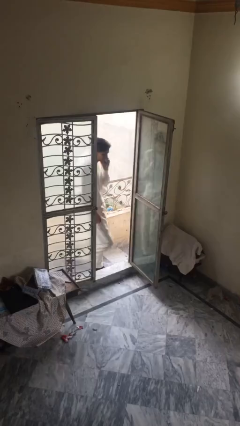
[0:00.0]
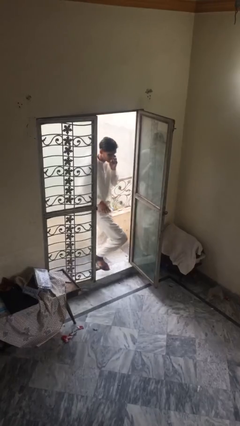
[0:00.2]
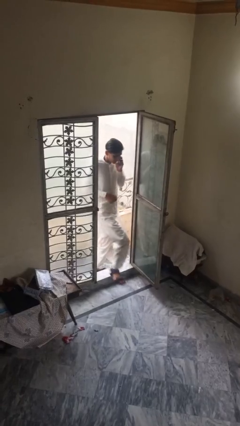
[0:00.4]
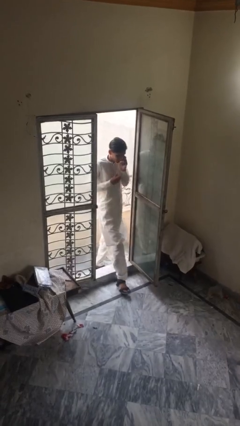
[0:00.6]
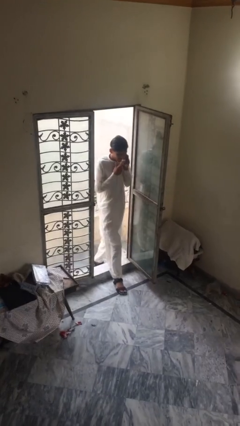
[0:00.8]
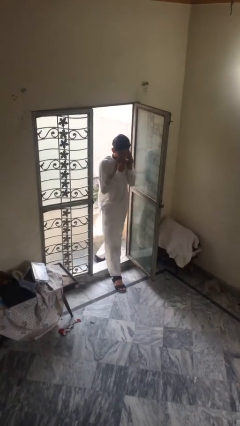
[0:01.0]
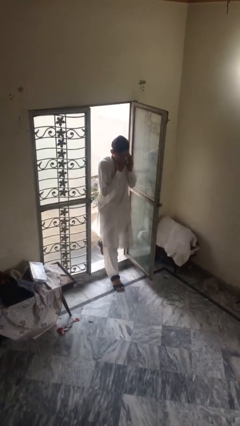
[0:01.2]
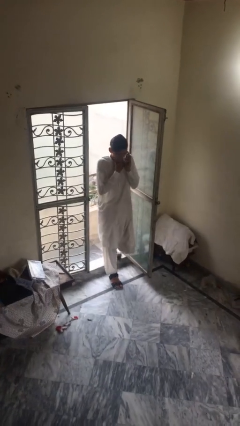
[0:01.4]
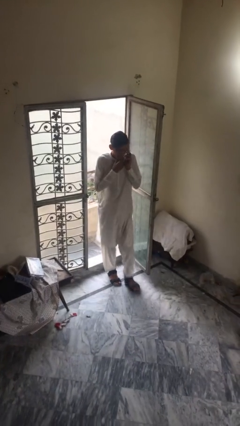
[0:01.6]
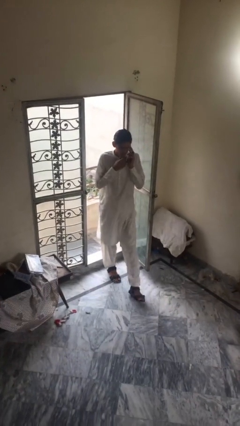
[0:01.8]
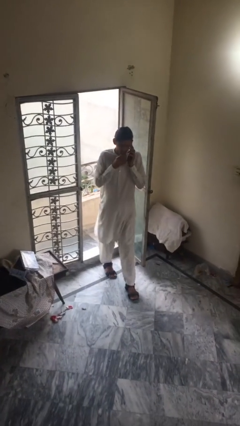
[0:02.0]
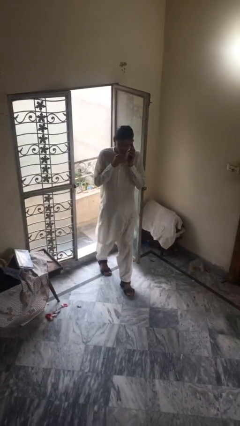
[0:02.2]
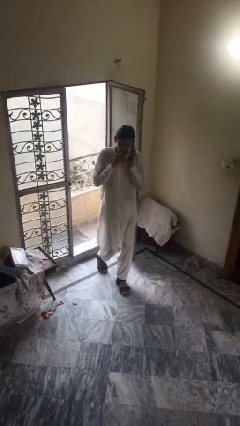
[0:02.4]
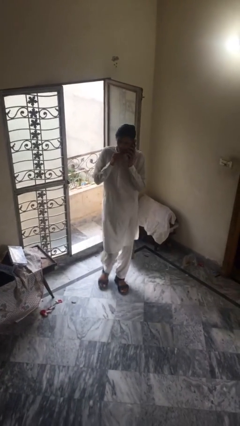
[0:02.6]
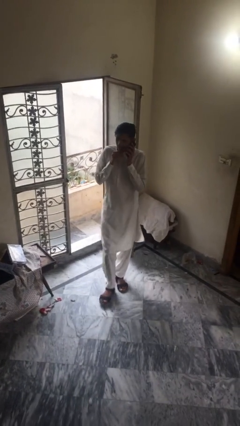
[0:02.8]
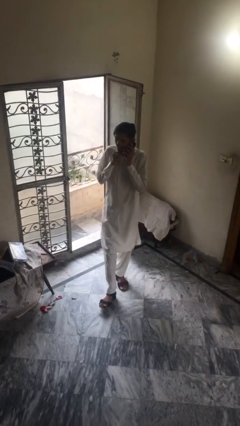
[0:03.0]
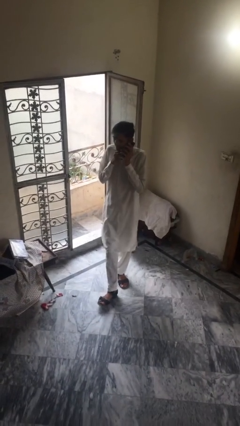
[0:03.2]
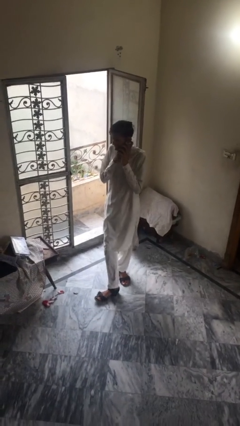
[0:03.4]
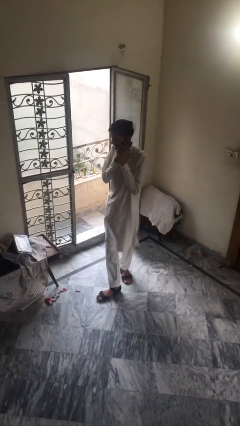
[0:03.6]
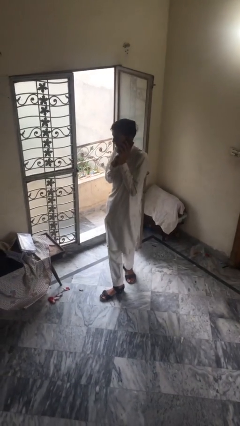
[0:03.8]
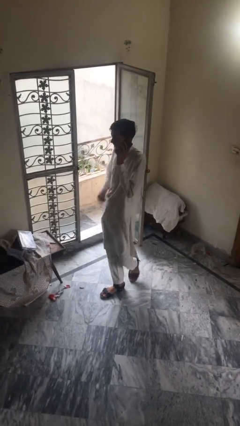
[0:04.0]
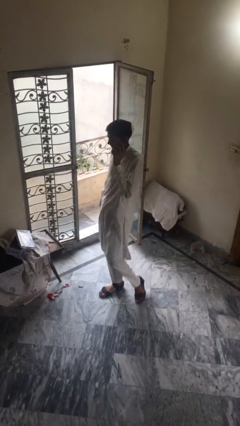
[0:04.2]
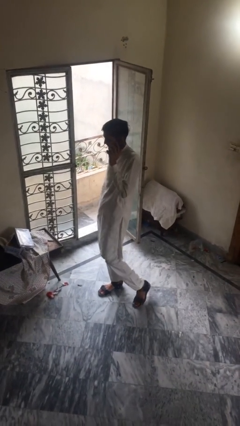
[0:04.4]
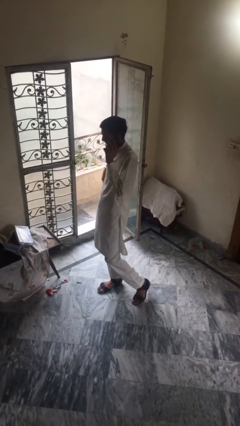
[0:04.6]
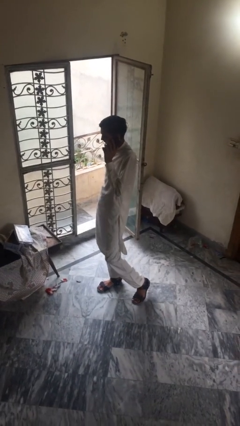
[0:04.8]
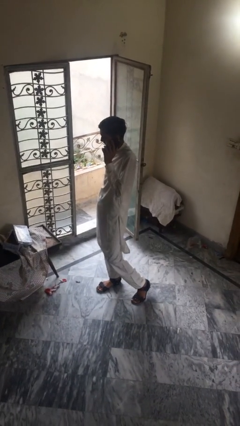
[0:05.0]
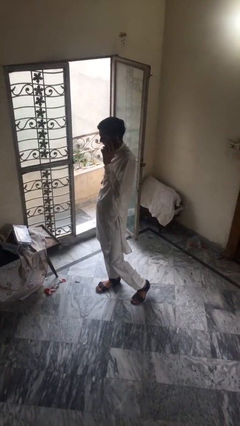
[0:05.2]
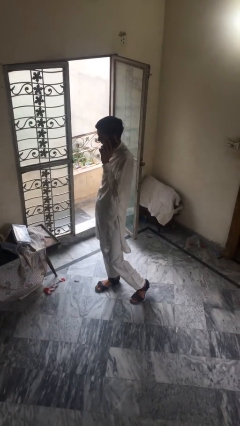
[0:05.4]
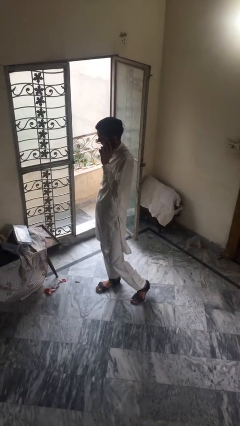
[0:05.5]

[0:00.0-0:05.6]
person enters scene through structure

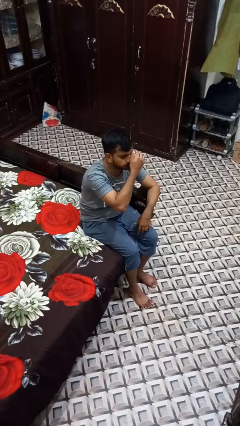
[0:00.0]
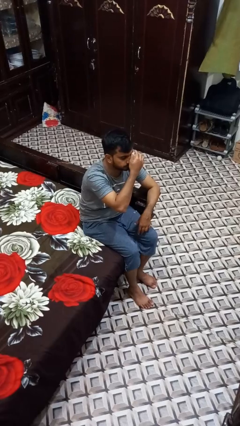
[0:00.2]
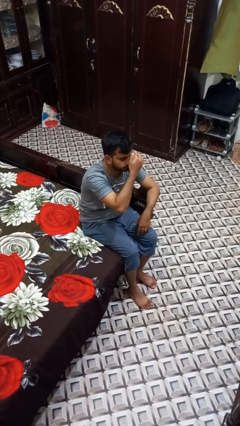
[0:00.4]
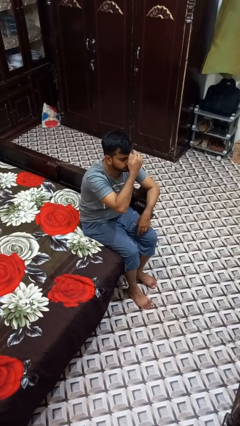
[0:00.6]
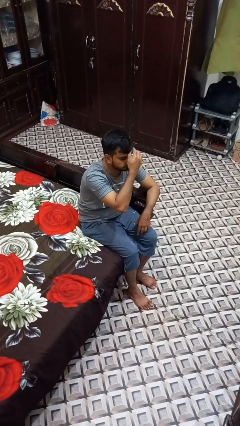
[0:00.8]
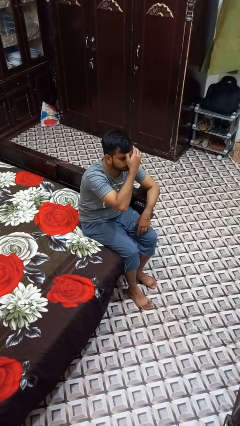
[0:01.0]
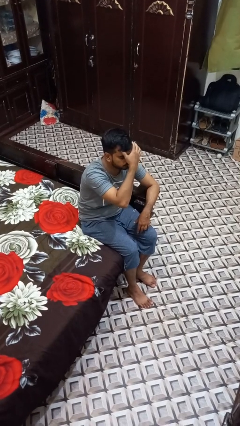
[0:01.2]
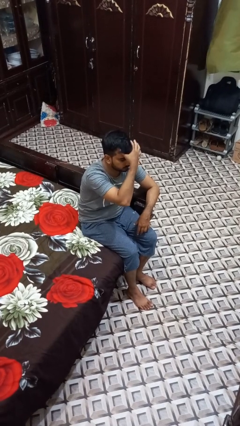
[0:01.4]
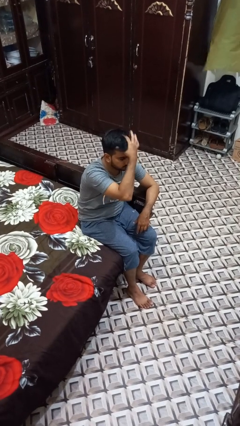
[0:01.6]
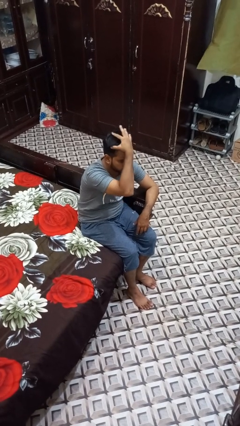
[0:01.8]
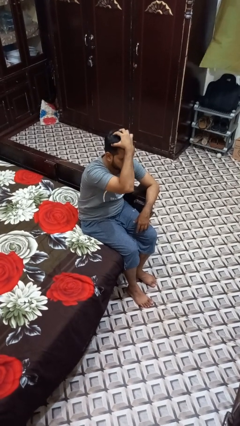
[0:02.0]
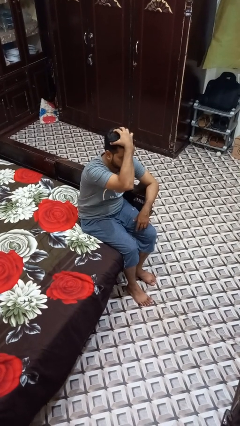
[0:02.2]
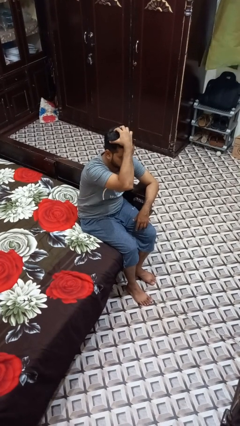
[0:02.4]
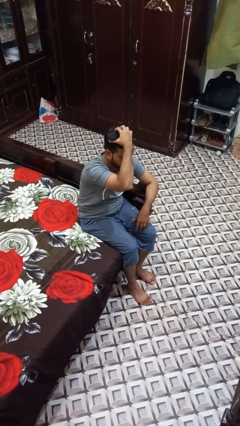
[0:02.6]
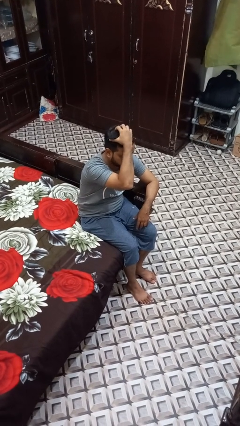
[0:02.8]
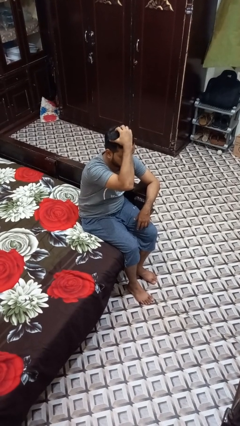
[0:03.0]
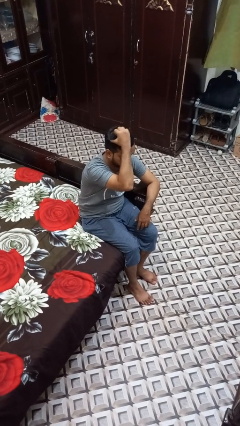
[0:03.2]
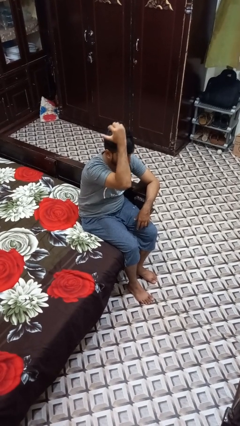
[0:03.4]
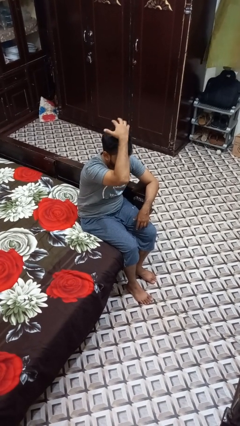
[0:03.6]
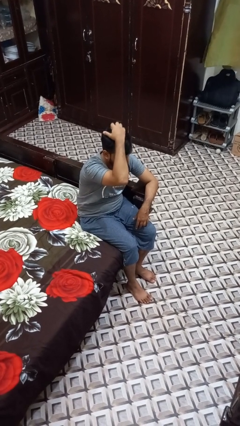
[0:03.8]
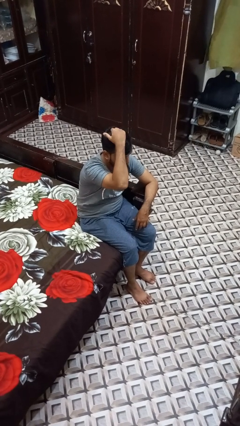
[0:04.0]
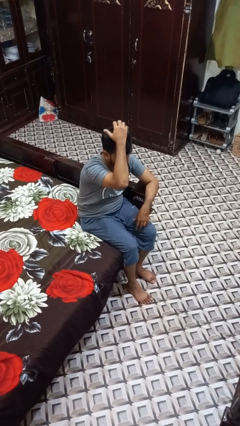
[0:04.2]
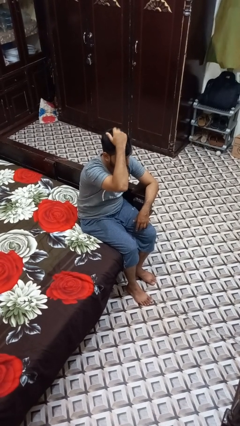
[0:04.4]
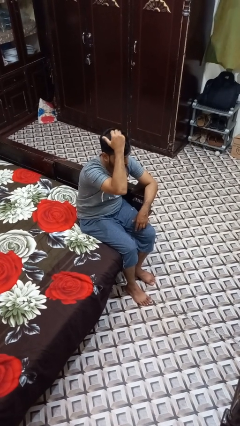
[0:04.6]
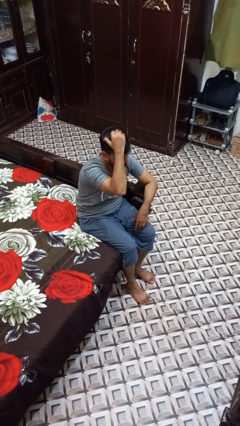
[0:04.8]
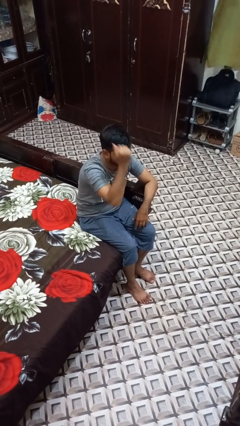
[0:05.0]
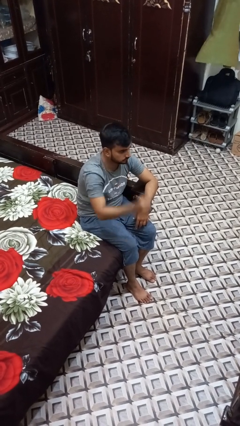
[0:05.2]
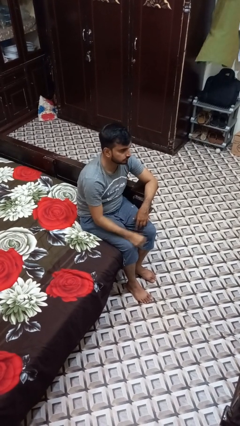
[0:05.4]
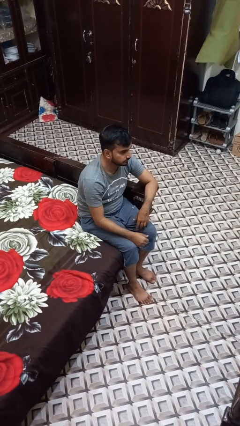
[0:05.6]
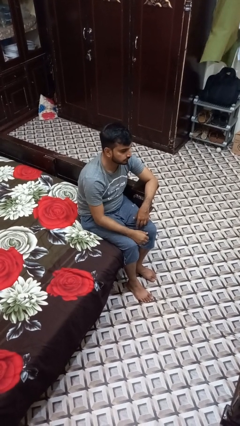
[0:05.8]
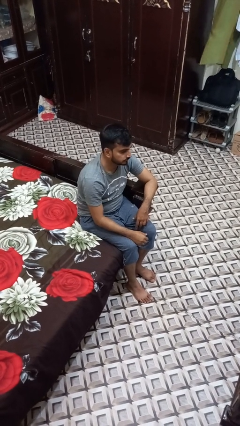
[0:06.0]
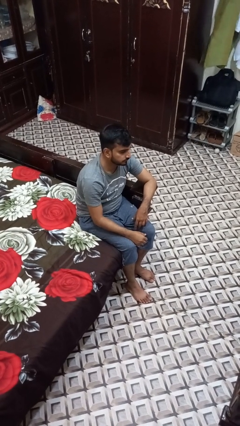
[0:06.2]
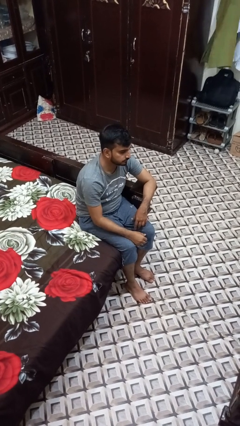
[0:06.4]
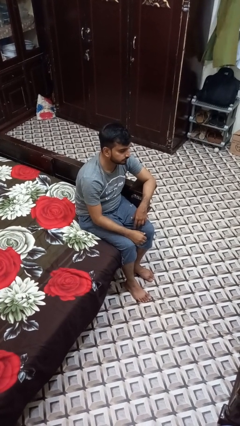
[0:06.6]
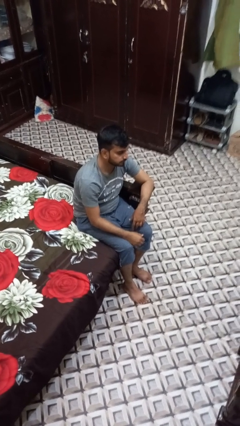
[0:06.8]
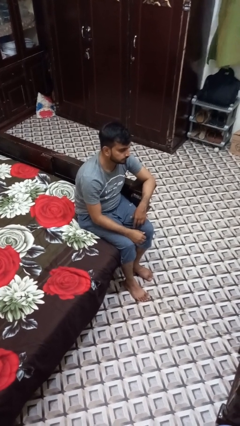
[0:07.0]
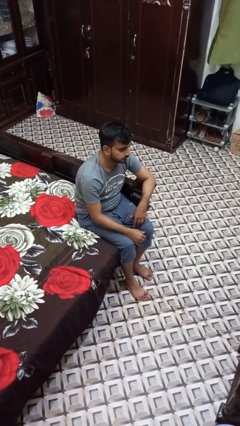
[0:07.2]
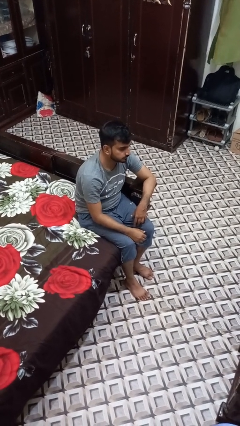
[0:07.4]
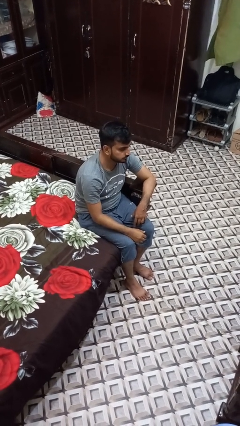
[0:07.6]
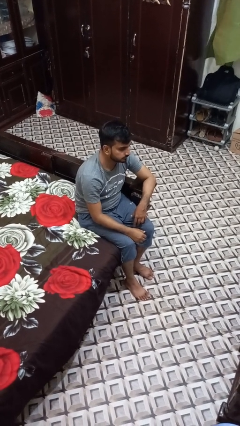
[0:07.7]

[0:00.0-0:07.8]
person strokes hair

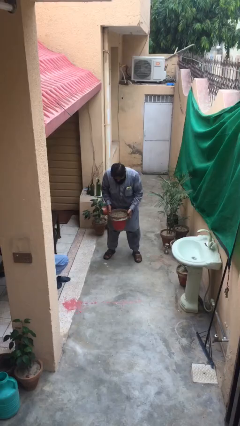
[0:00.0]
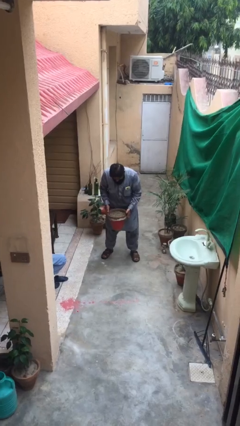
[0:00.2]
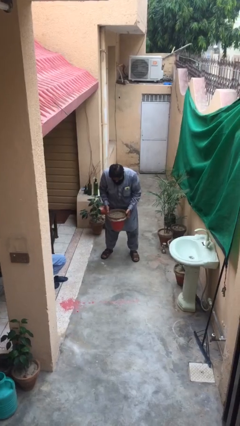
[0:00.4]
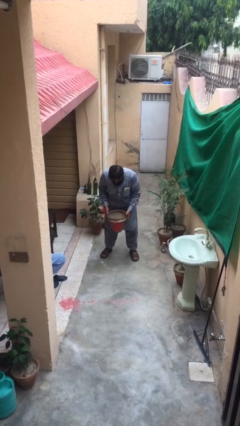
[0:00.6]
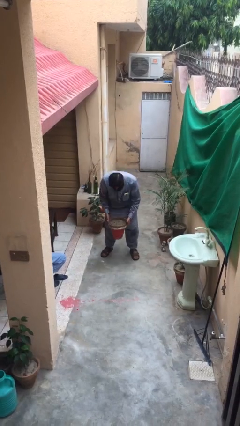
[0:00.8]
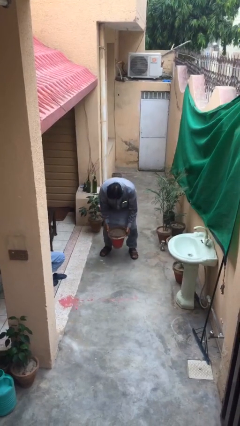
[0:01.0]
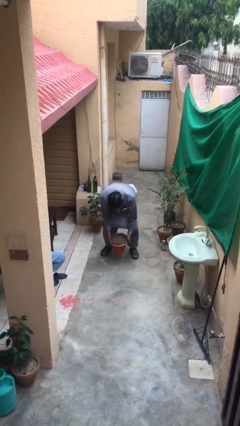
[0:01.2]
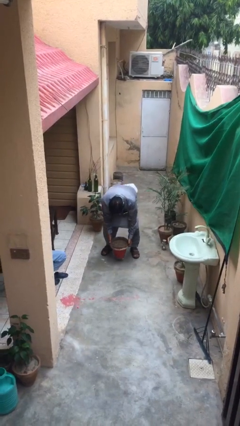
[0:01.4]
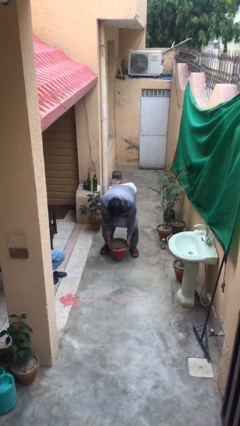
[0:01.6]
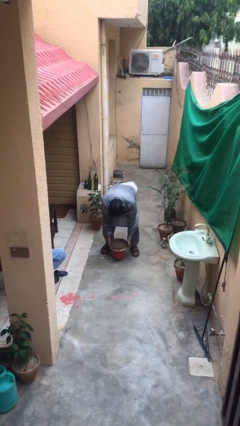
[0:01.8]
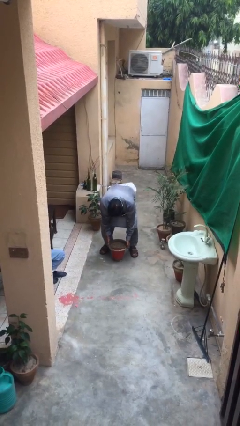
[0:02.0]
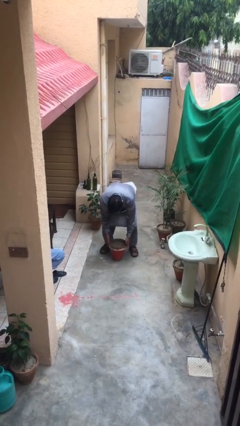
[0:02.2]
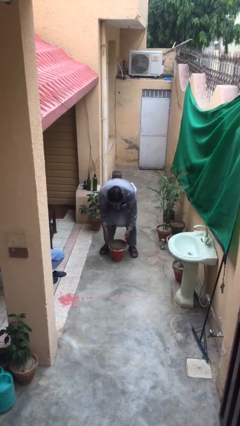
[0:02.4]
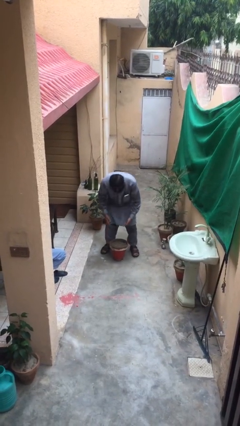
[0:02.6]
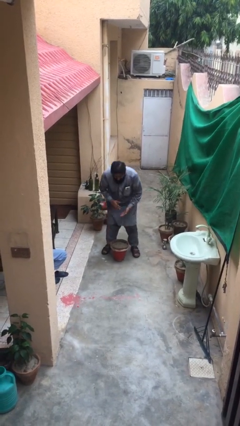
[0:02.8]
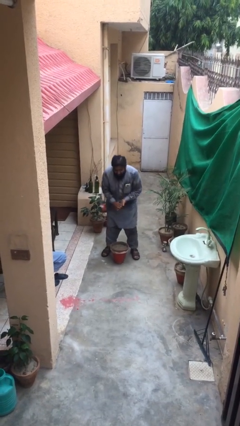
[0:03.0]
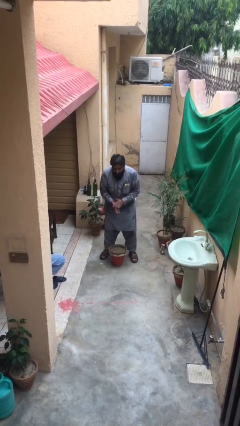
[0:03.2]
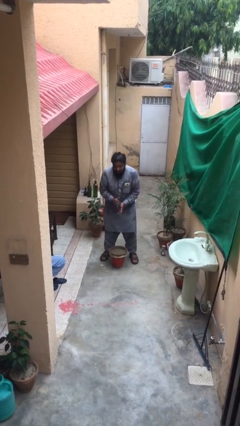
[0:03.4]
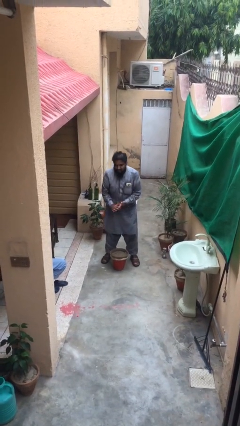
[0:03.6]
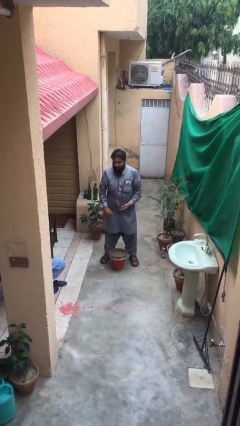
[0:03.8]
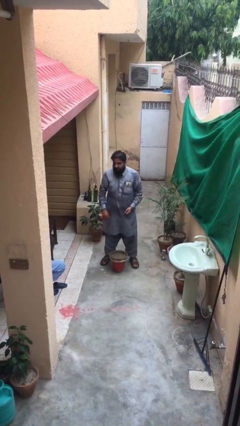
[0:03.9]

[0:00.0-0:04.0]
person puts down object on floor

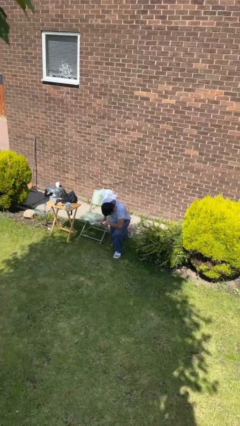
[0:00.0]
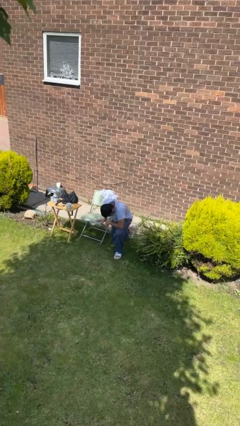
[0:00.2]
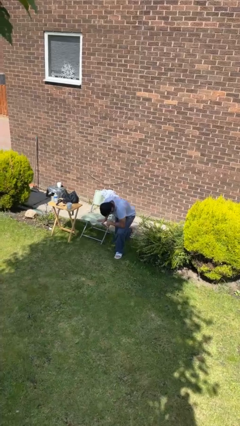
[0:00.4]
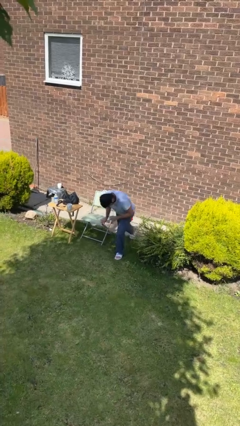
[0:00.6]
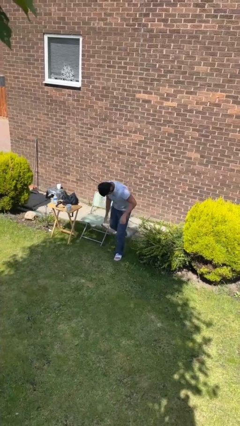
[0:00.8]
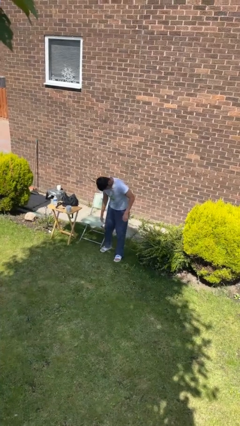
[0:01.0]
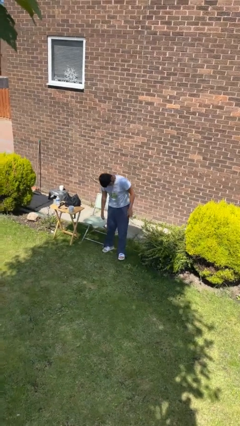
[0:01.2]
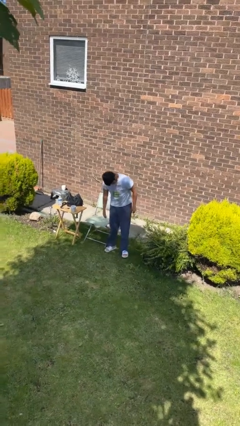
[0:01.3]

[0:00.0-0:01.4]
person stands up from floor
